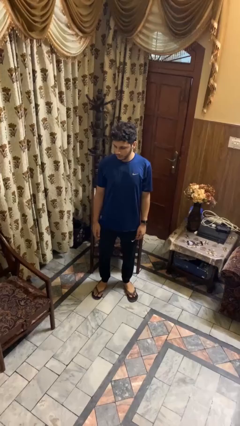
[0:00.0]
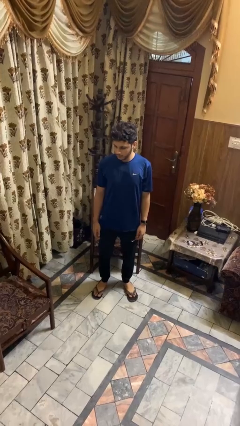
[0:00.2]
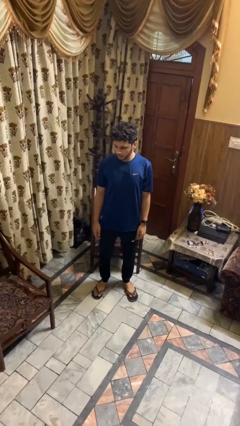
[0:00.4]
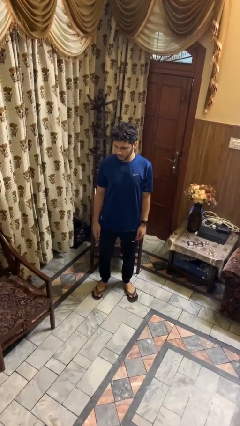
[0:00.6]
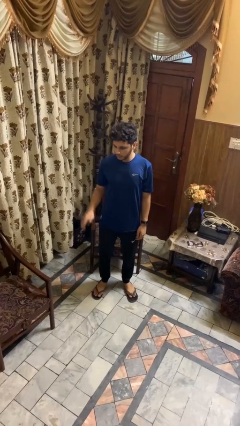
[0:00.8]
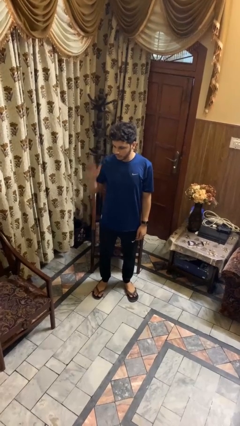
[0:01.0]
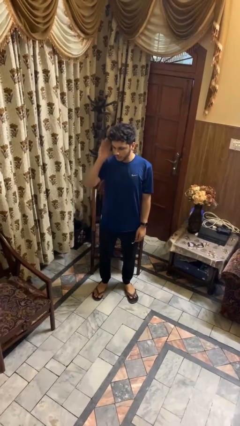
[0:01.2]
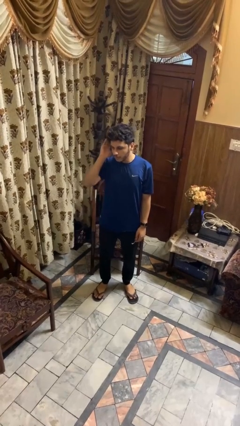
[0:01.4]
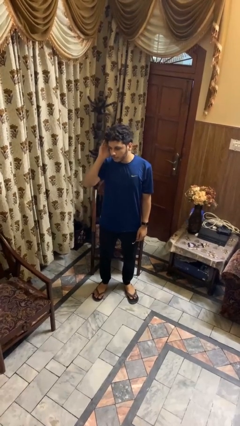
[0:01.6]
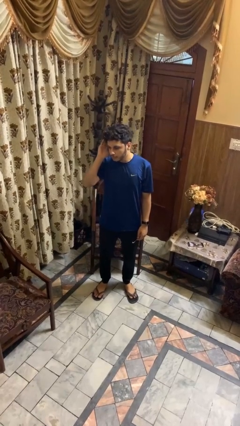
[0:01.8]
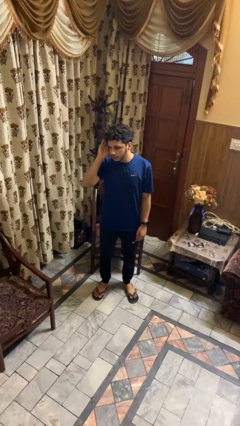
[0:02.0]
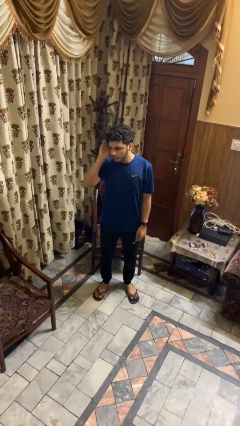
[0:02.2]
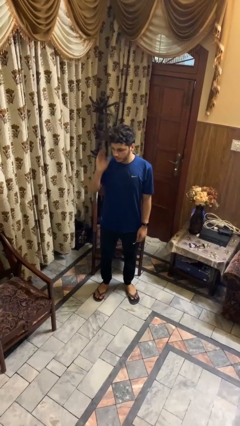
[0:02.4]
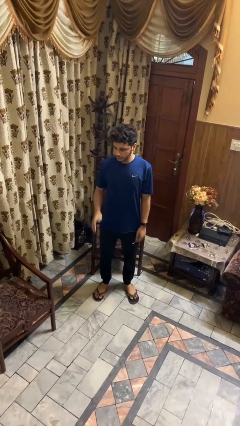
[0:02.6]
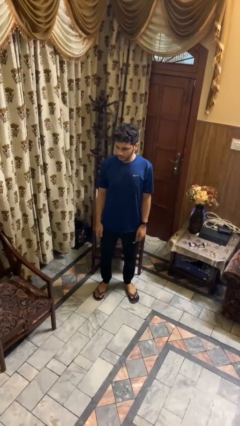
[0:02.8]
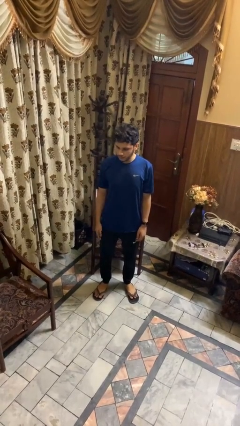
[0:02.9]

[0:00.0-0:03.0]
person gestures listen closely

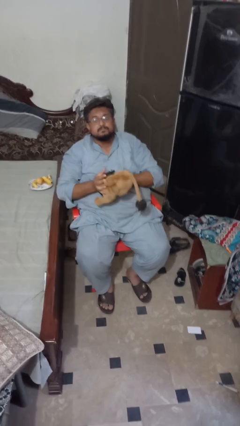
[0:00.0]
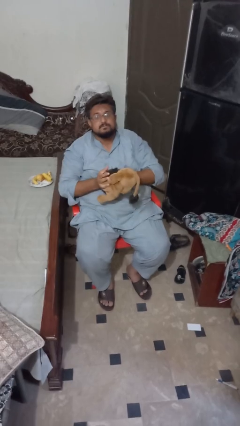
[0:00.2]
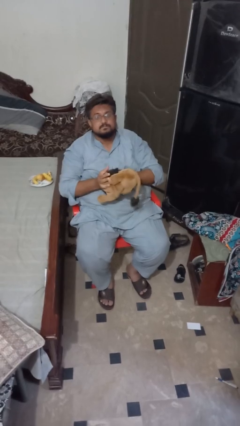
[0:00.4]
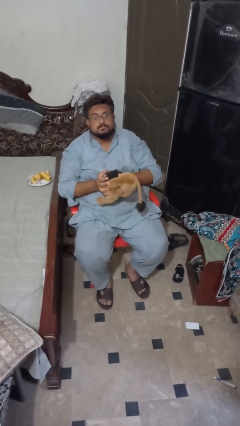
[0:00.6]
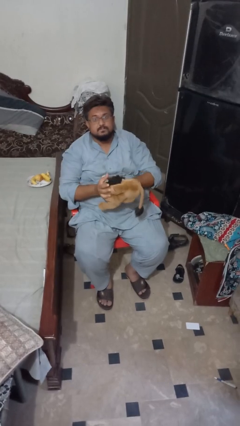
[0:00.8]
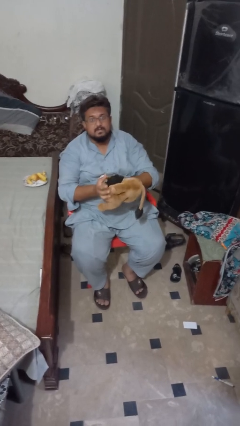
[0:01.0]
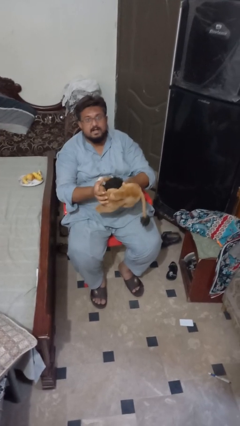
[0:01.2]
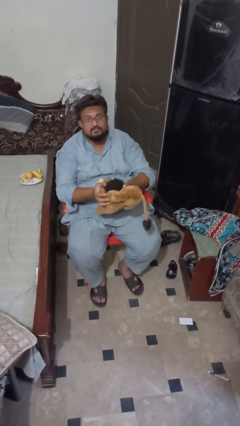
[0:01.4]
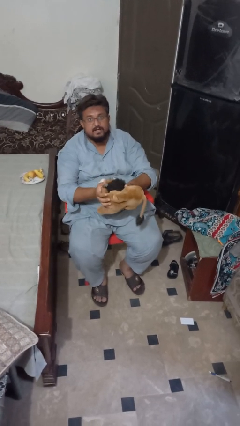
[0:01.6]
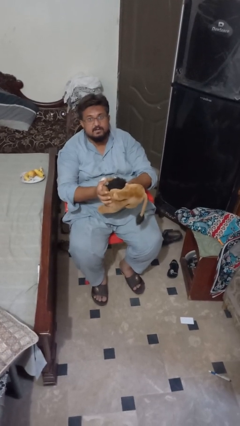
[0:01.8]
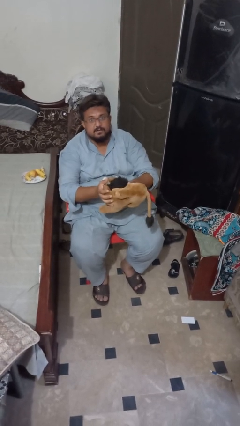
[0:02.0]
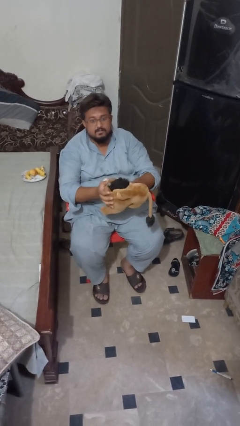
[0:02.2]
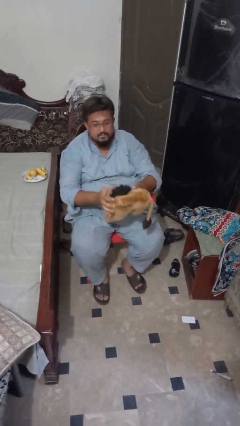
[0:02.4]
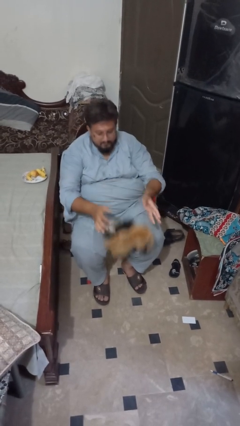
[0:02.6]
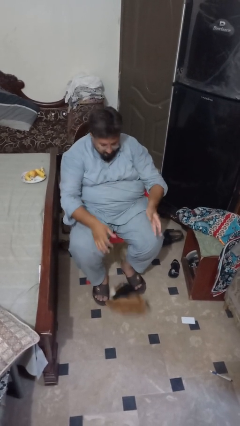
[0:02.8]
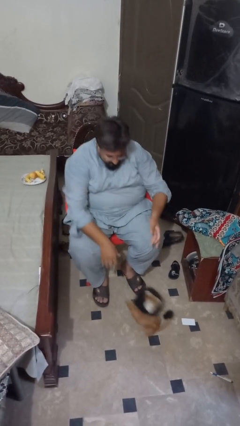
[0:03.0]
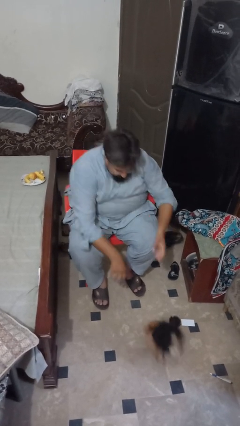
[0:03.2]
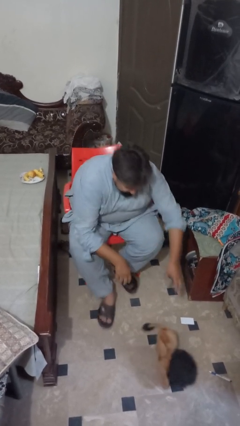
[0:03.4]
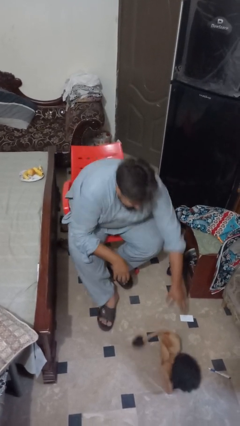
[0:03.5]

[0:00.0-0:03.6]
person catches dropped object

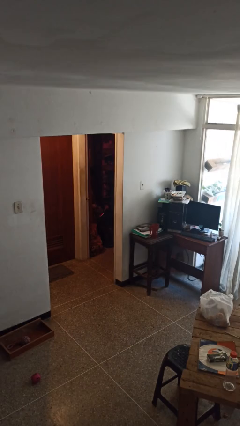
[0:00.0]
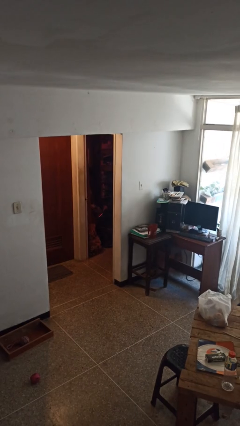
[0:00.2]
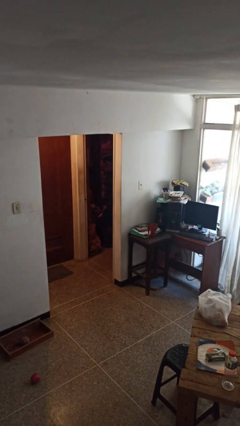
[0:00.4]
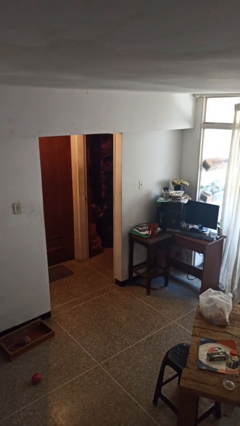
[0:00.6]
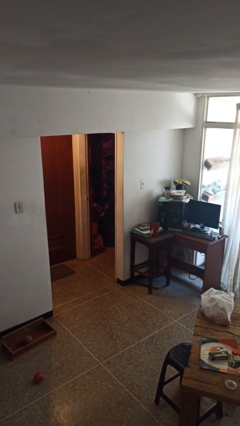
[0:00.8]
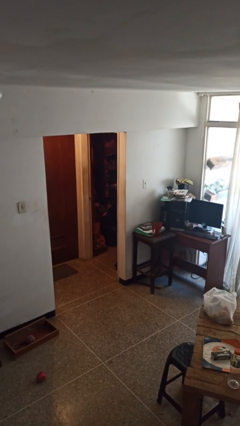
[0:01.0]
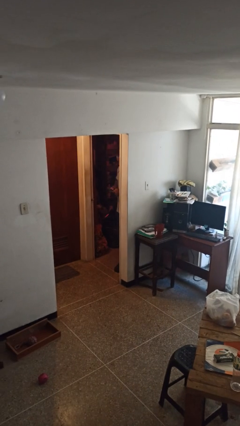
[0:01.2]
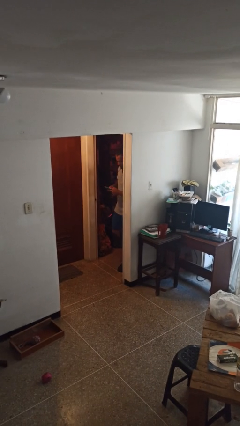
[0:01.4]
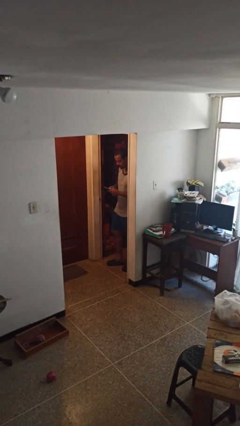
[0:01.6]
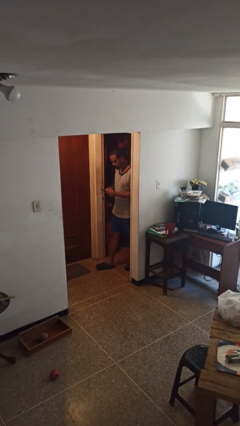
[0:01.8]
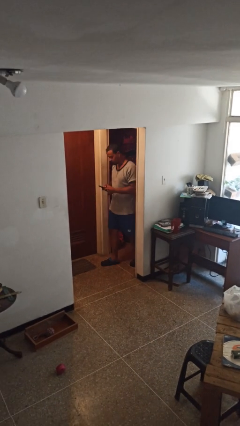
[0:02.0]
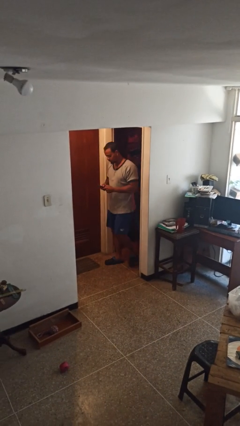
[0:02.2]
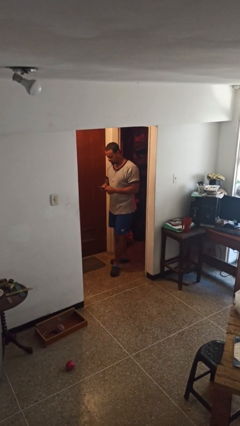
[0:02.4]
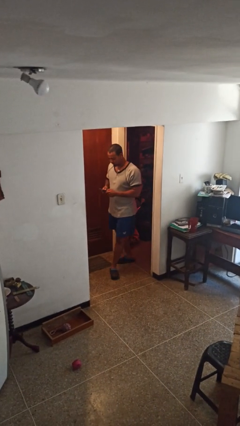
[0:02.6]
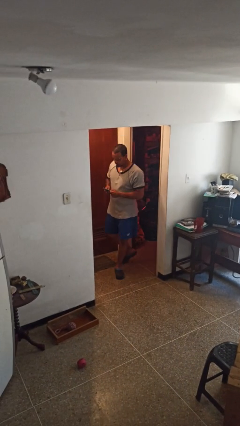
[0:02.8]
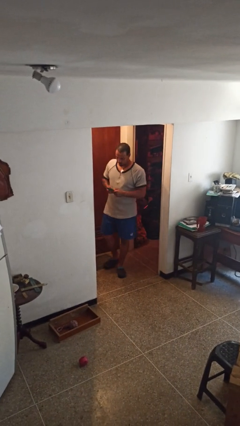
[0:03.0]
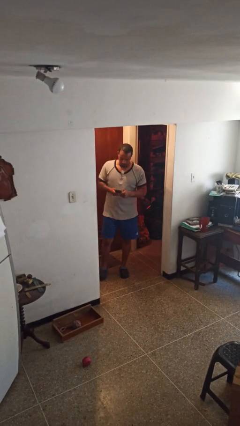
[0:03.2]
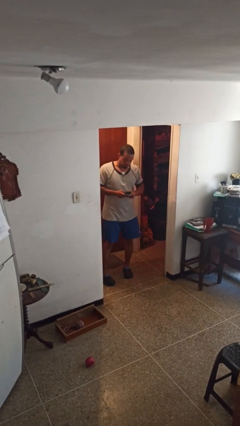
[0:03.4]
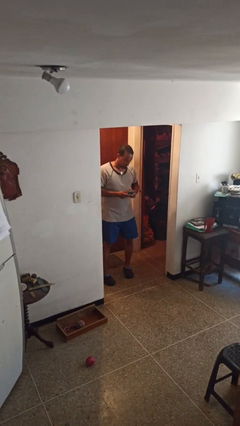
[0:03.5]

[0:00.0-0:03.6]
person enters scene through structure

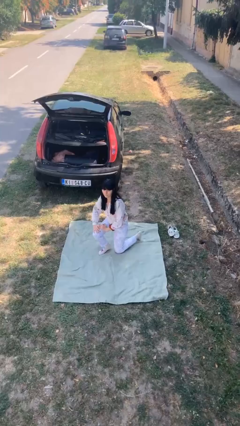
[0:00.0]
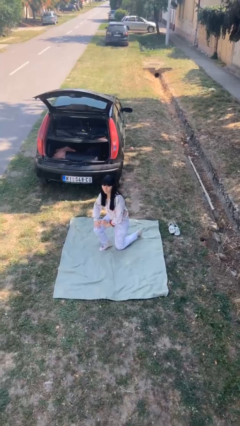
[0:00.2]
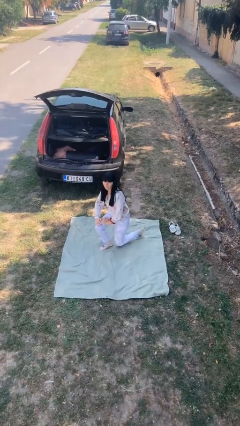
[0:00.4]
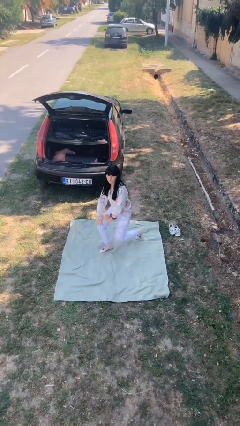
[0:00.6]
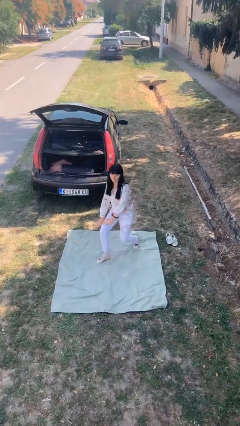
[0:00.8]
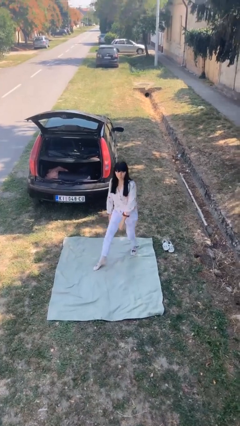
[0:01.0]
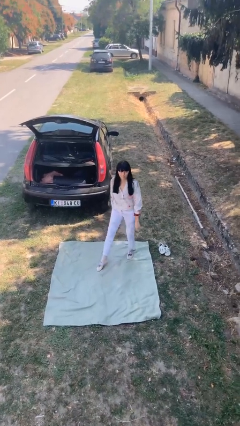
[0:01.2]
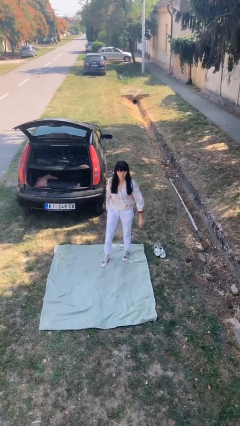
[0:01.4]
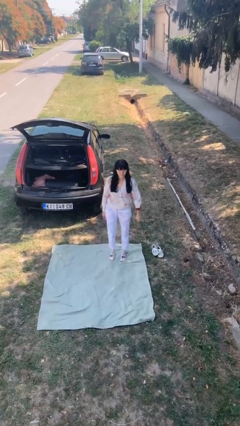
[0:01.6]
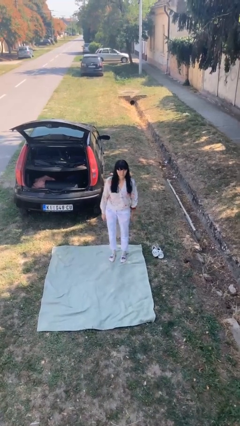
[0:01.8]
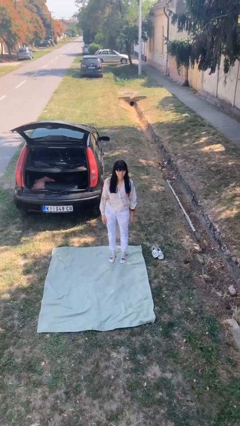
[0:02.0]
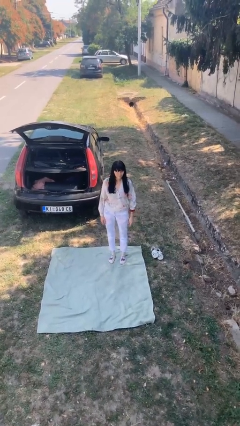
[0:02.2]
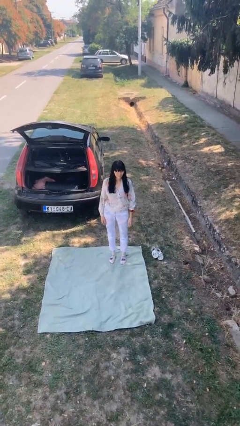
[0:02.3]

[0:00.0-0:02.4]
person stands up from floor

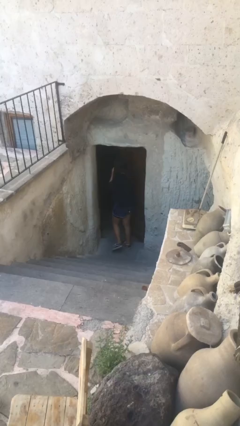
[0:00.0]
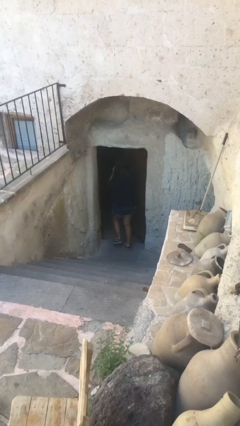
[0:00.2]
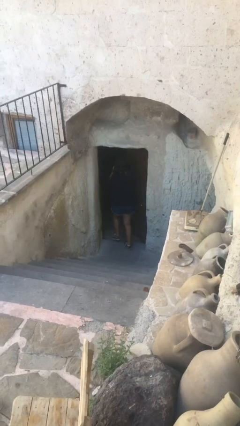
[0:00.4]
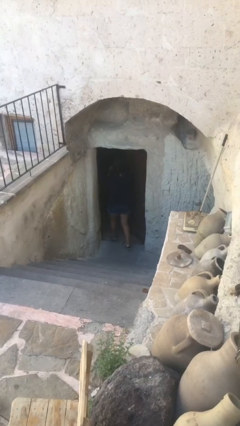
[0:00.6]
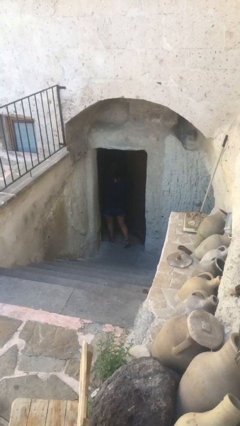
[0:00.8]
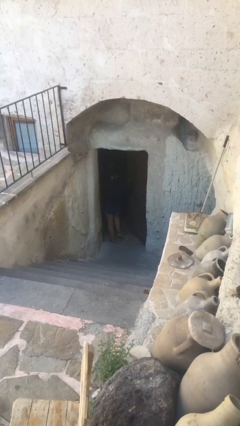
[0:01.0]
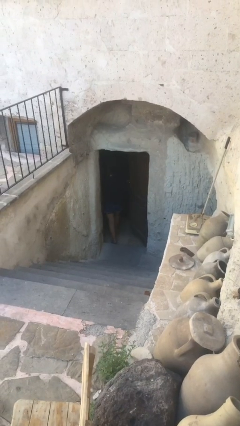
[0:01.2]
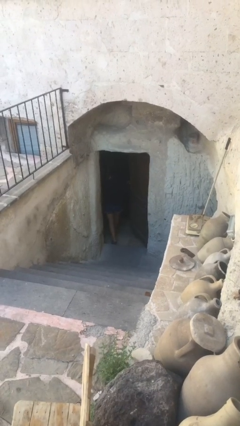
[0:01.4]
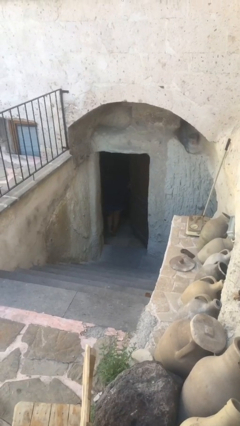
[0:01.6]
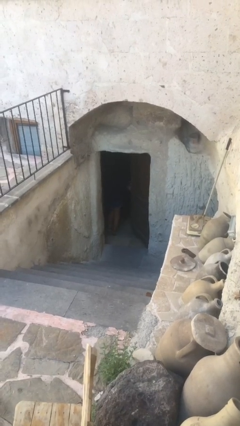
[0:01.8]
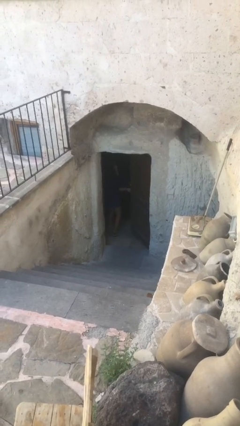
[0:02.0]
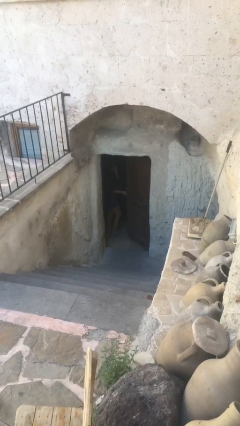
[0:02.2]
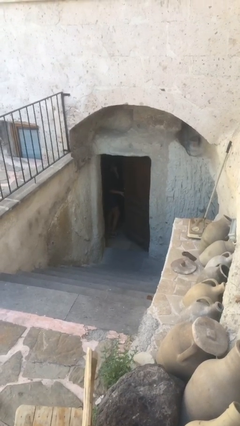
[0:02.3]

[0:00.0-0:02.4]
person exits scene through structure

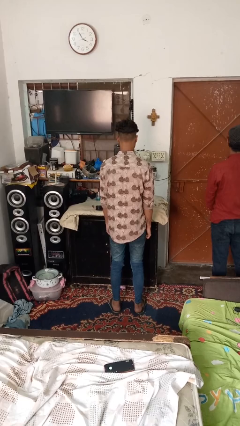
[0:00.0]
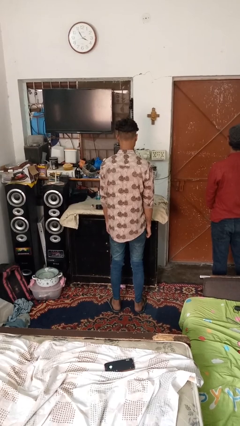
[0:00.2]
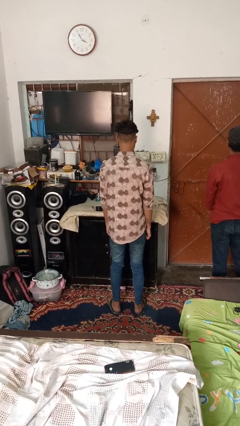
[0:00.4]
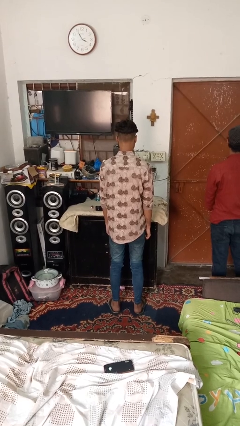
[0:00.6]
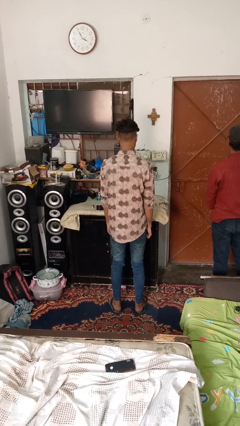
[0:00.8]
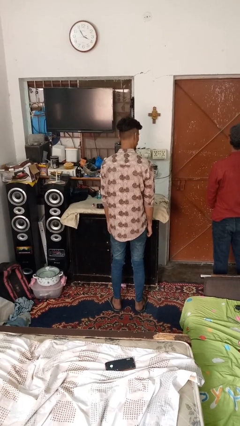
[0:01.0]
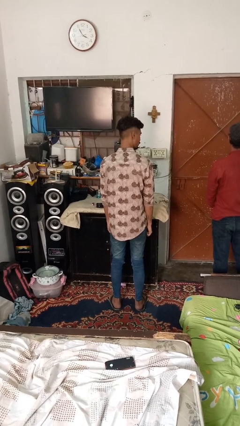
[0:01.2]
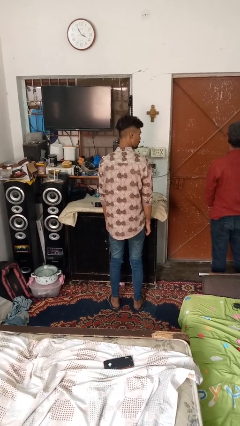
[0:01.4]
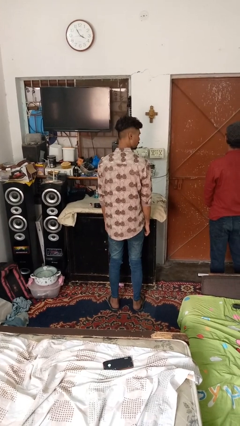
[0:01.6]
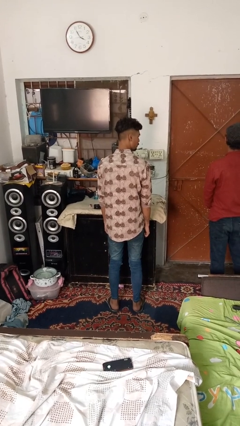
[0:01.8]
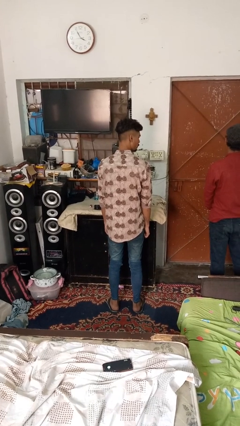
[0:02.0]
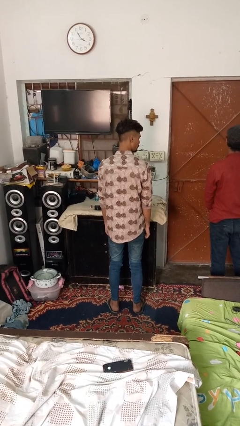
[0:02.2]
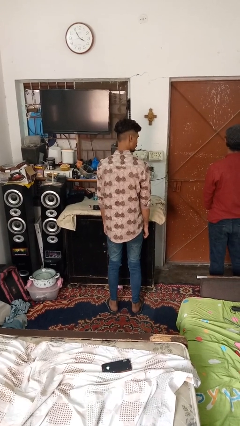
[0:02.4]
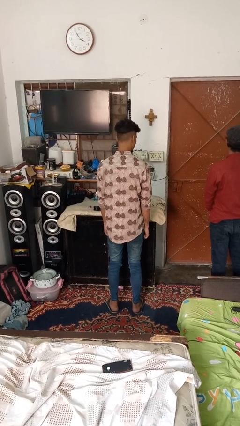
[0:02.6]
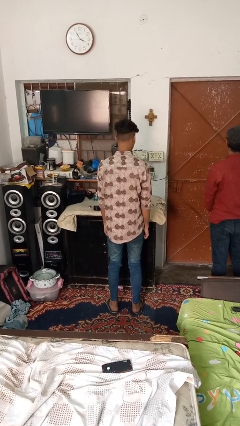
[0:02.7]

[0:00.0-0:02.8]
person looks over shoulder
